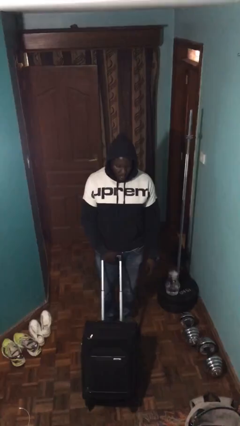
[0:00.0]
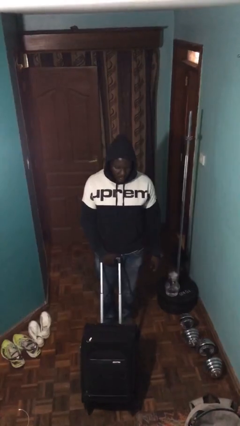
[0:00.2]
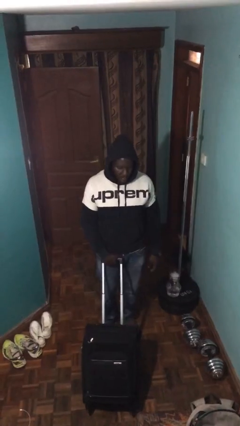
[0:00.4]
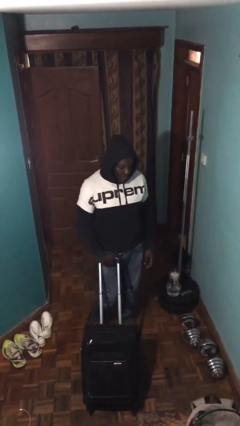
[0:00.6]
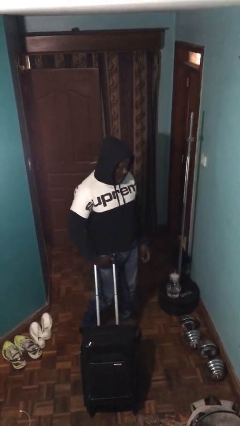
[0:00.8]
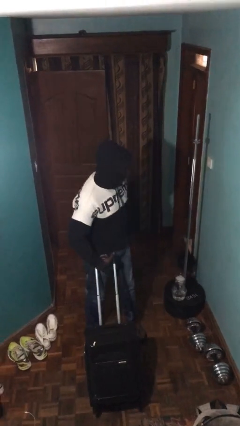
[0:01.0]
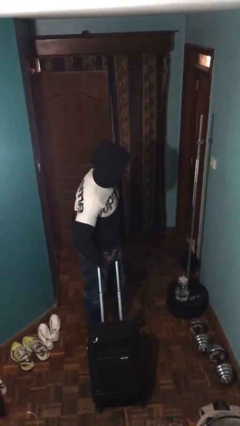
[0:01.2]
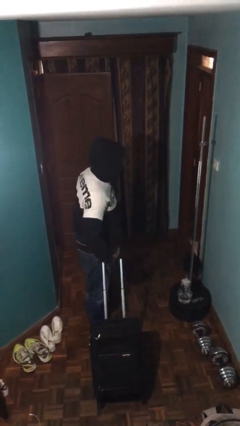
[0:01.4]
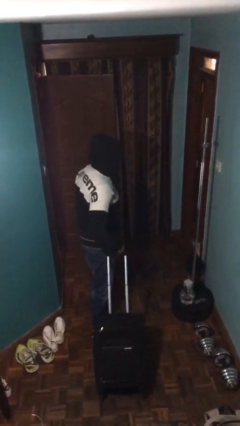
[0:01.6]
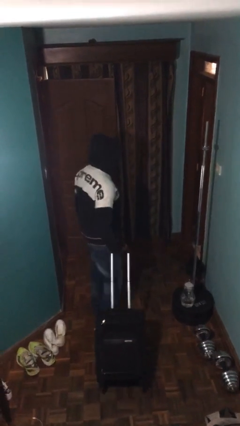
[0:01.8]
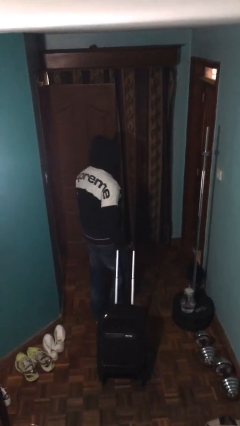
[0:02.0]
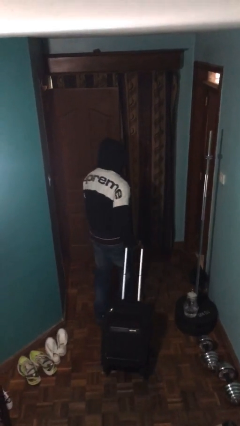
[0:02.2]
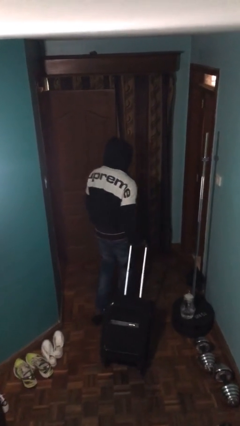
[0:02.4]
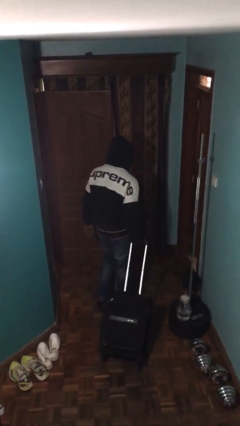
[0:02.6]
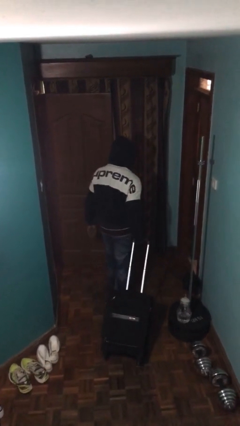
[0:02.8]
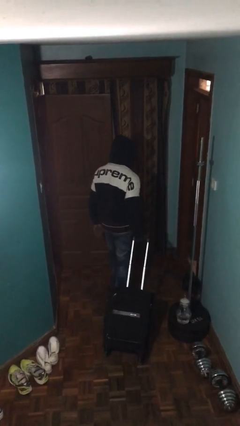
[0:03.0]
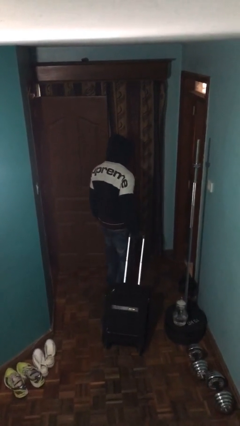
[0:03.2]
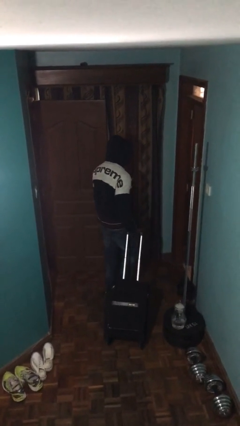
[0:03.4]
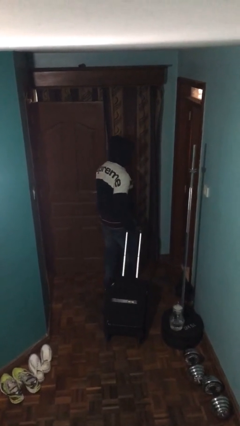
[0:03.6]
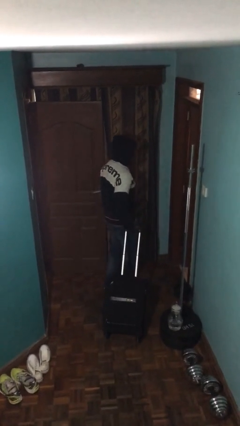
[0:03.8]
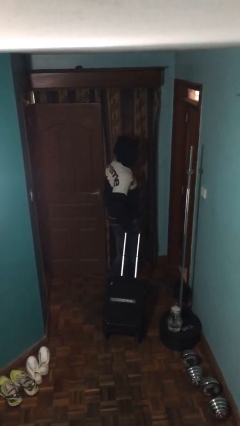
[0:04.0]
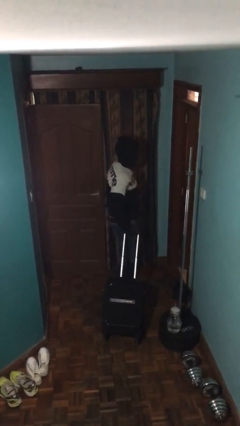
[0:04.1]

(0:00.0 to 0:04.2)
person pulls wheeled cart

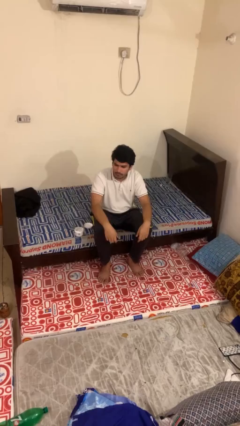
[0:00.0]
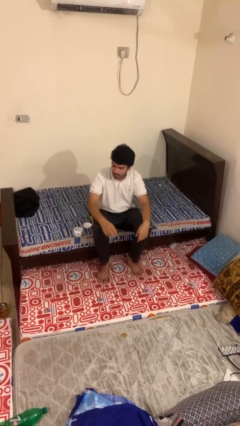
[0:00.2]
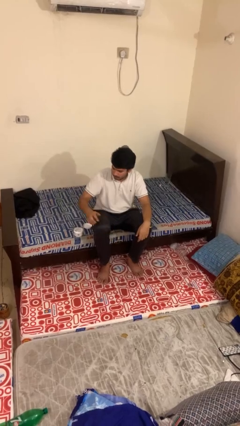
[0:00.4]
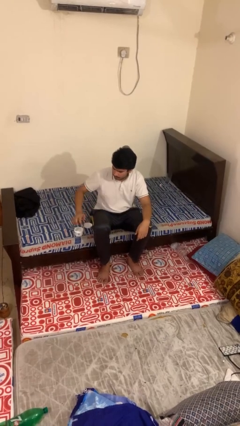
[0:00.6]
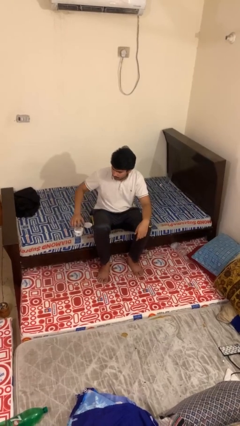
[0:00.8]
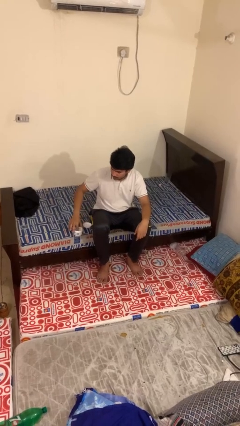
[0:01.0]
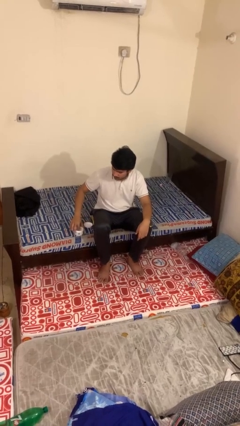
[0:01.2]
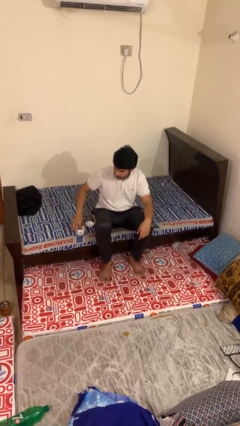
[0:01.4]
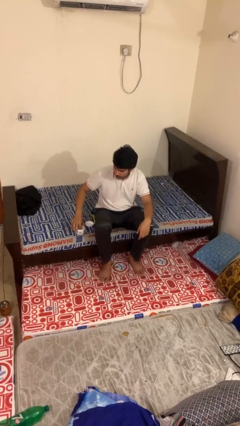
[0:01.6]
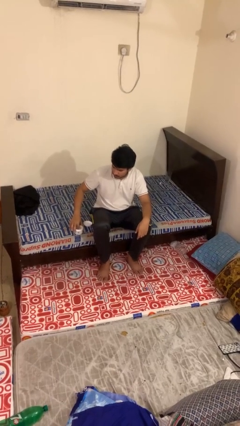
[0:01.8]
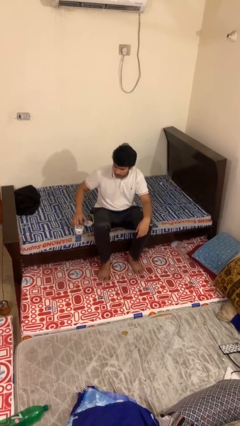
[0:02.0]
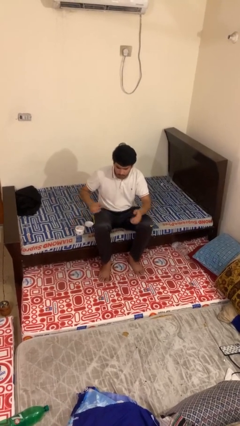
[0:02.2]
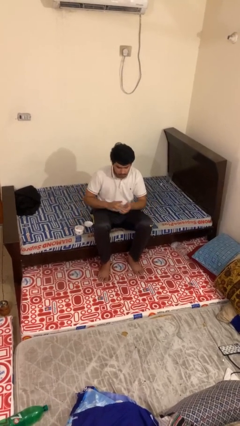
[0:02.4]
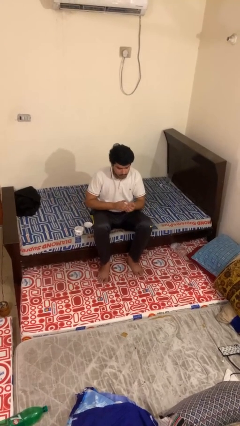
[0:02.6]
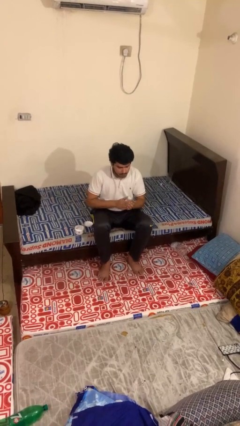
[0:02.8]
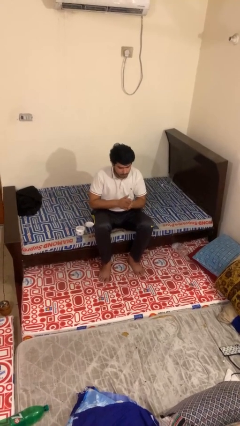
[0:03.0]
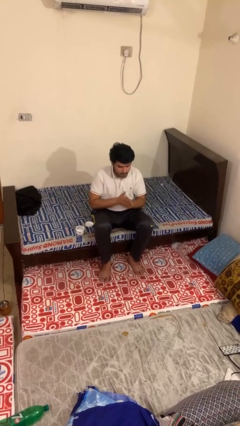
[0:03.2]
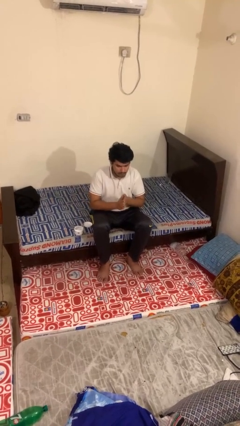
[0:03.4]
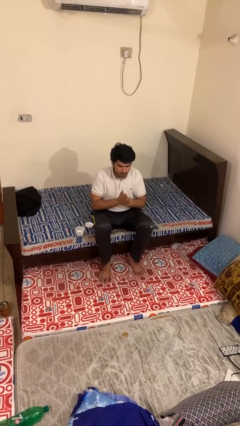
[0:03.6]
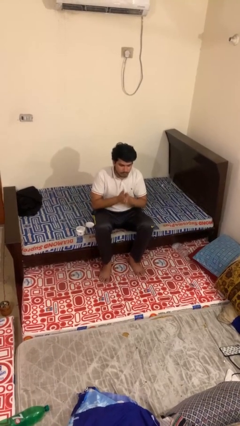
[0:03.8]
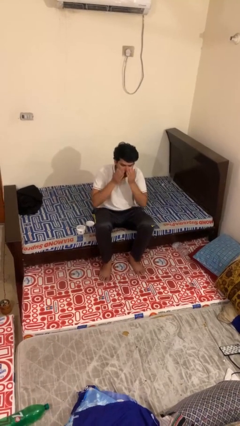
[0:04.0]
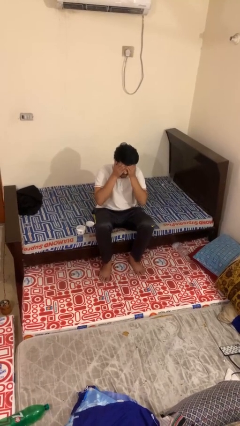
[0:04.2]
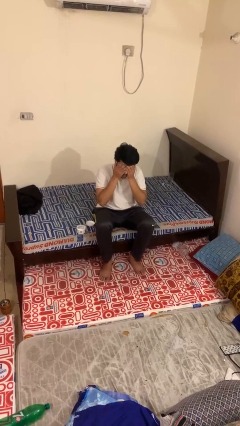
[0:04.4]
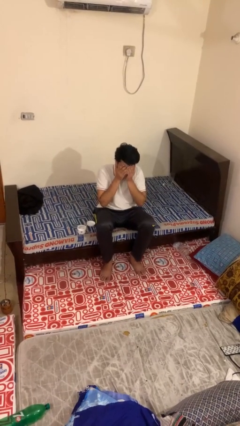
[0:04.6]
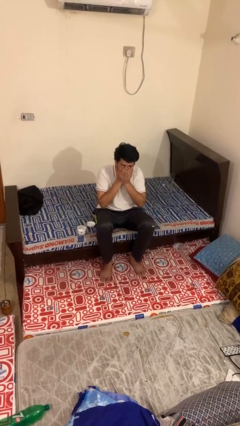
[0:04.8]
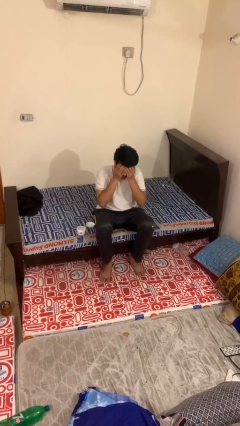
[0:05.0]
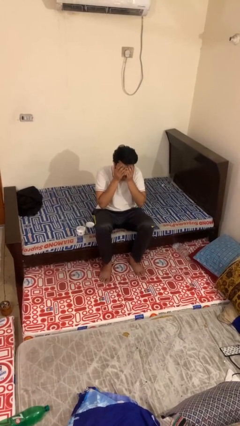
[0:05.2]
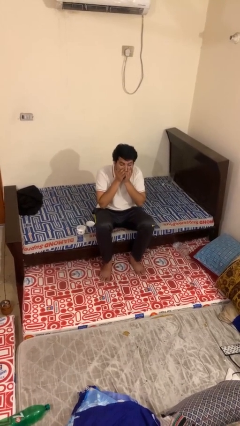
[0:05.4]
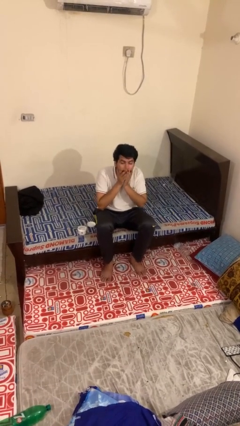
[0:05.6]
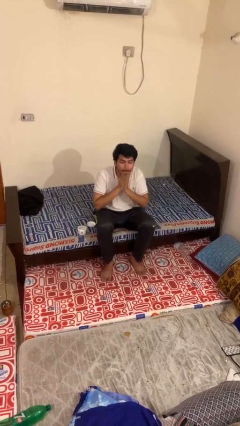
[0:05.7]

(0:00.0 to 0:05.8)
person applies facial moisturizer

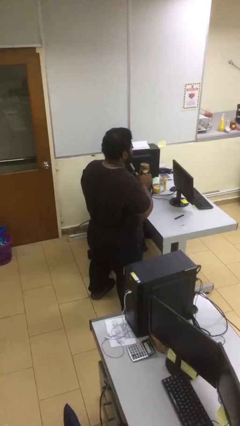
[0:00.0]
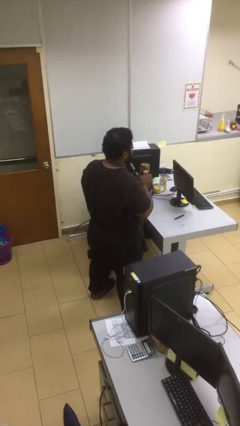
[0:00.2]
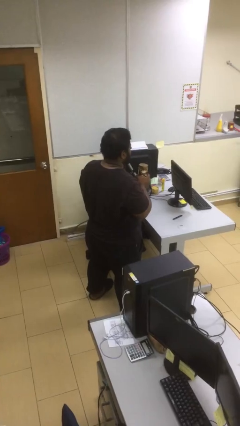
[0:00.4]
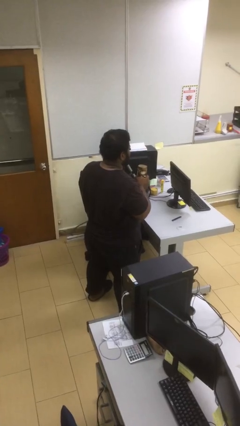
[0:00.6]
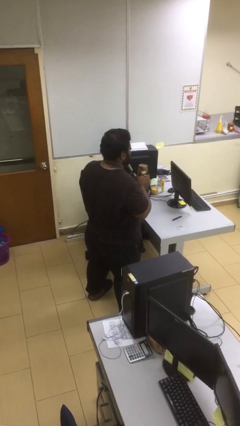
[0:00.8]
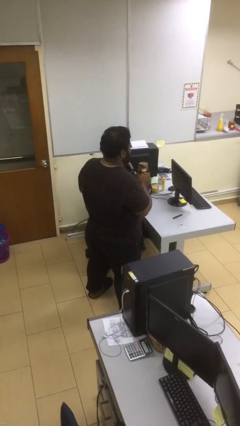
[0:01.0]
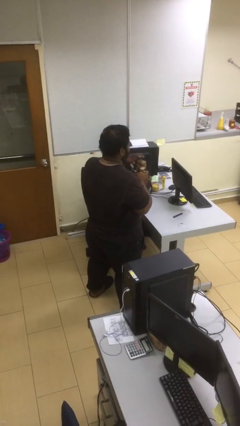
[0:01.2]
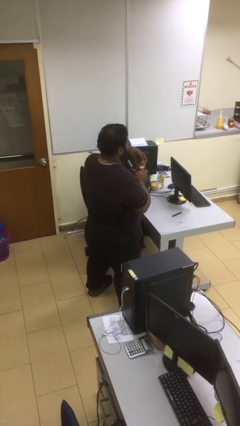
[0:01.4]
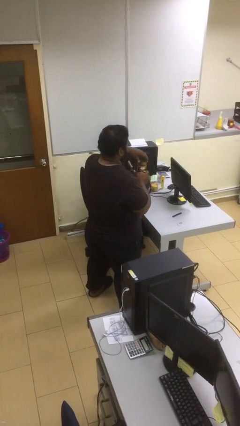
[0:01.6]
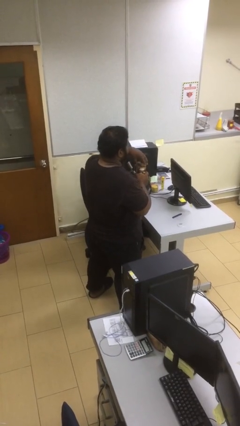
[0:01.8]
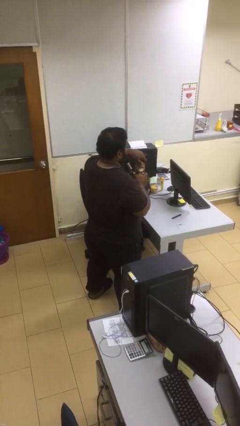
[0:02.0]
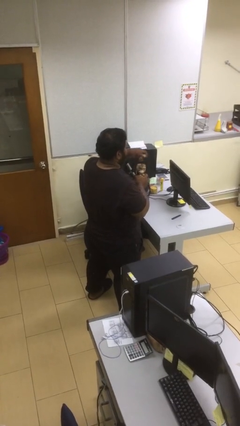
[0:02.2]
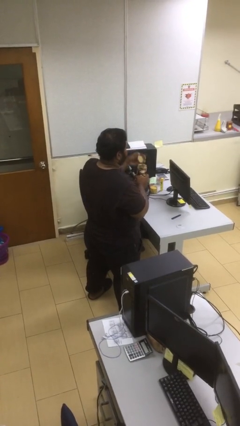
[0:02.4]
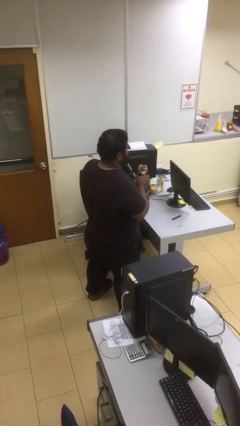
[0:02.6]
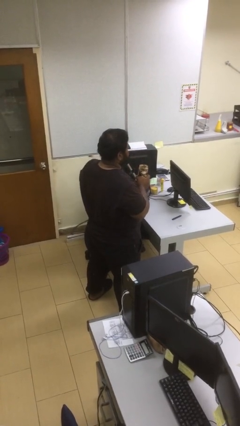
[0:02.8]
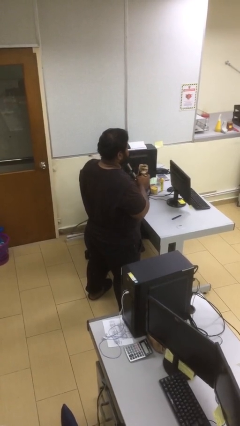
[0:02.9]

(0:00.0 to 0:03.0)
person opens jar

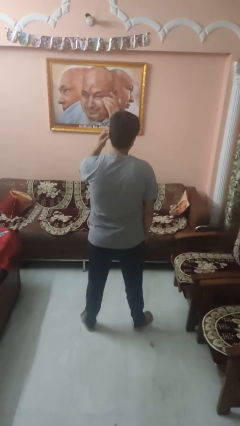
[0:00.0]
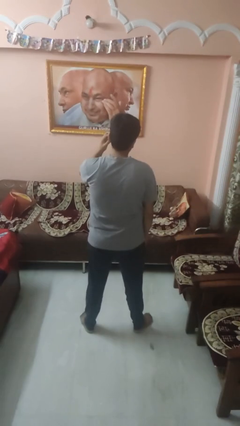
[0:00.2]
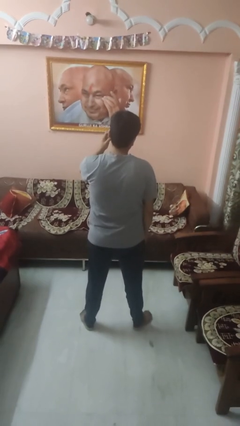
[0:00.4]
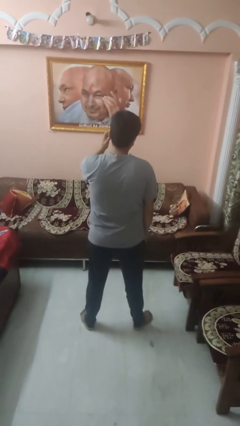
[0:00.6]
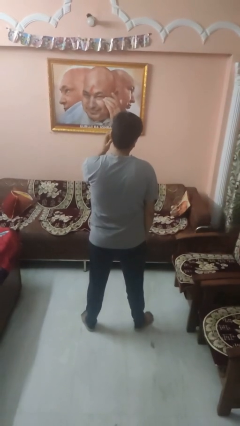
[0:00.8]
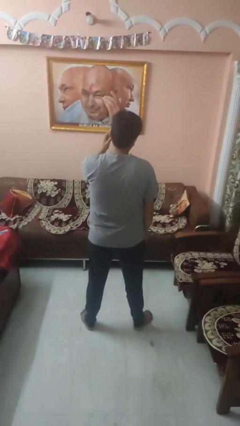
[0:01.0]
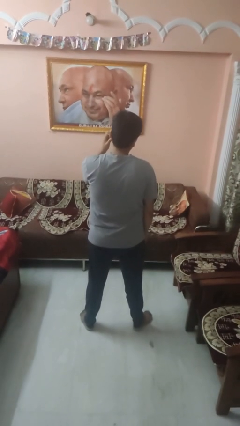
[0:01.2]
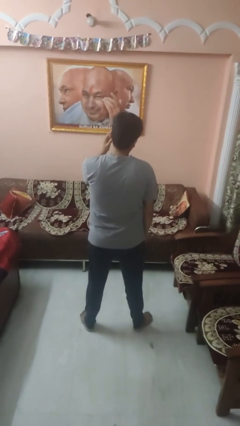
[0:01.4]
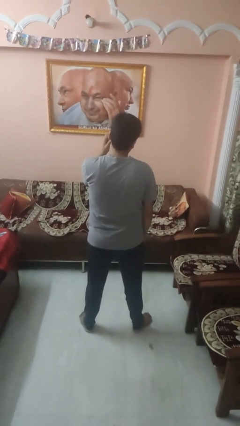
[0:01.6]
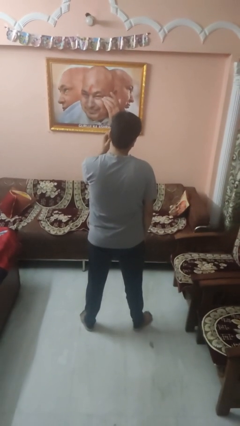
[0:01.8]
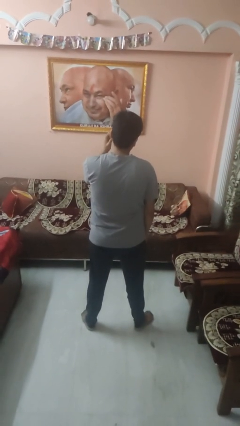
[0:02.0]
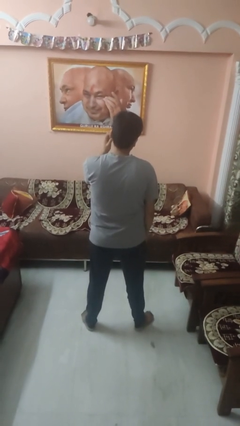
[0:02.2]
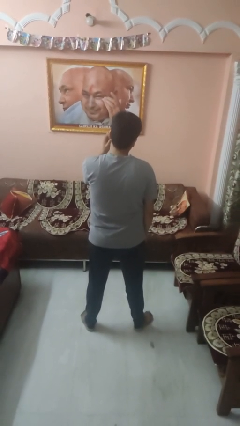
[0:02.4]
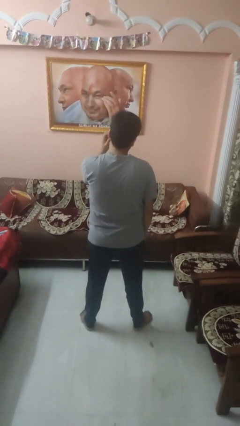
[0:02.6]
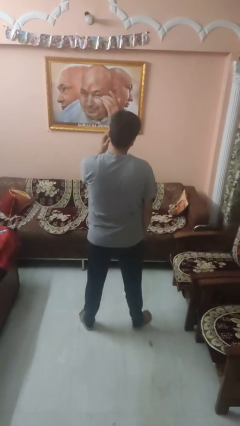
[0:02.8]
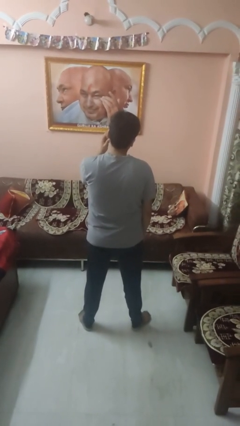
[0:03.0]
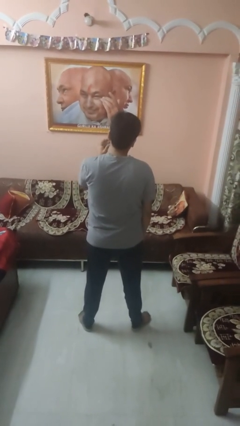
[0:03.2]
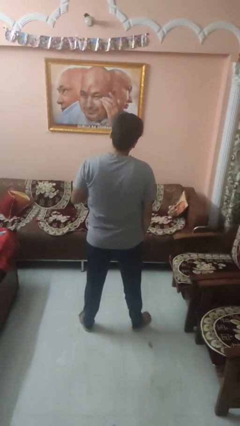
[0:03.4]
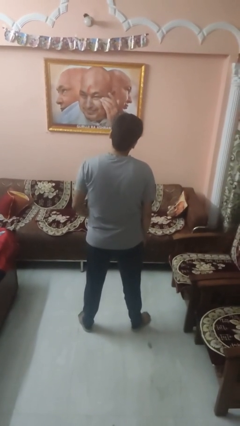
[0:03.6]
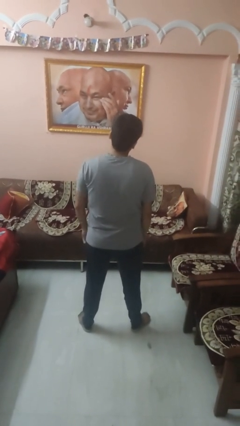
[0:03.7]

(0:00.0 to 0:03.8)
person scratches face

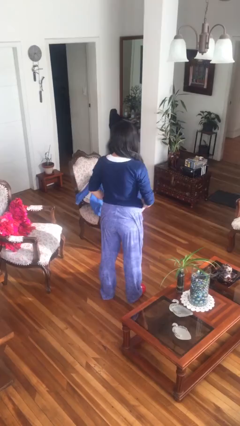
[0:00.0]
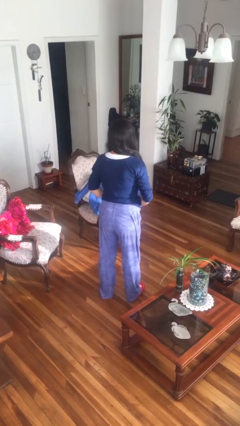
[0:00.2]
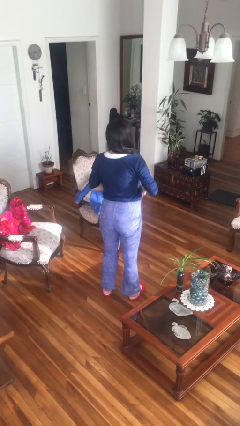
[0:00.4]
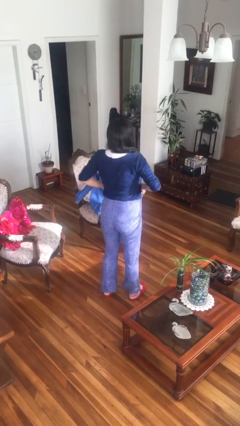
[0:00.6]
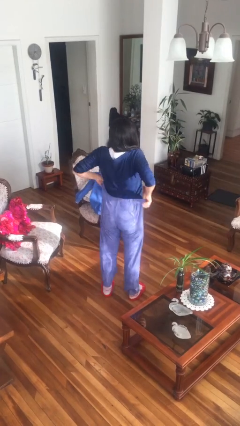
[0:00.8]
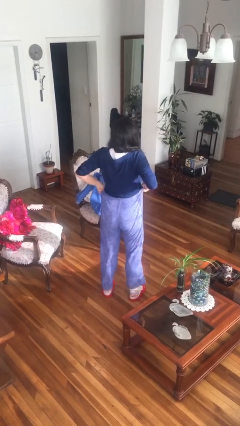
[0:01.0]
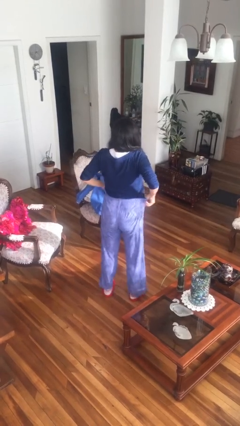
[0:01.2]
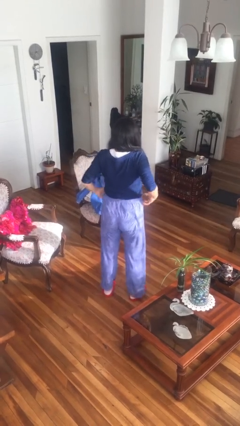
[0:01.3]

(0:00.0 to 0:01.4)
person hikes up pants
